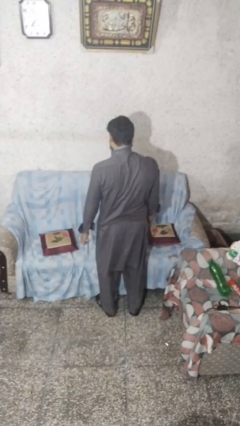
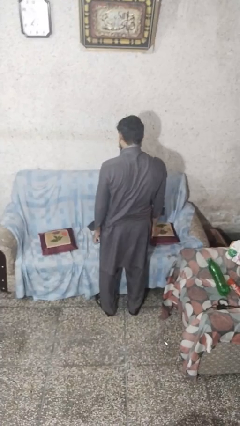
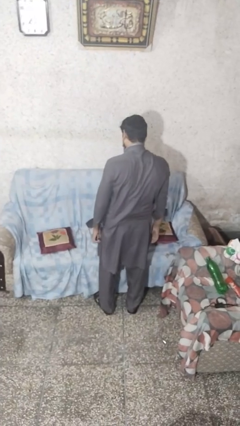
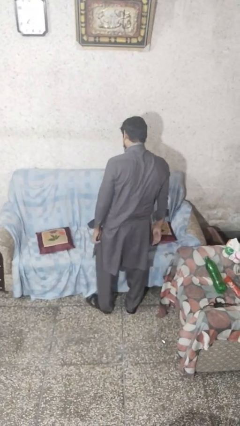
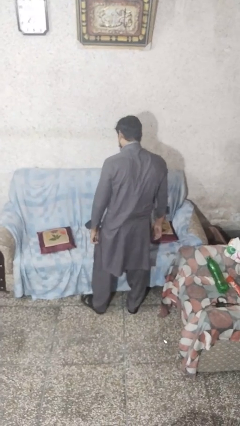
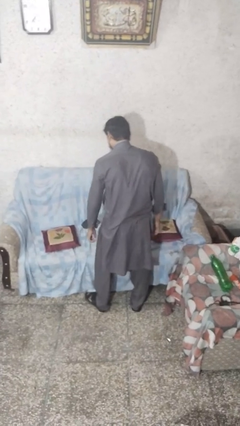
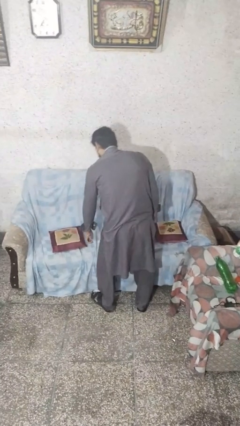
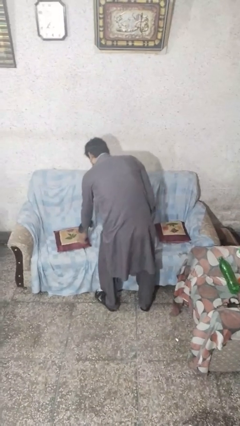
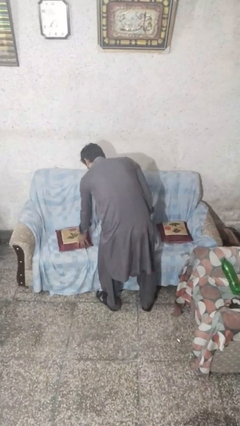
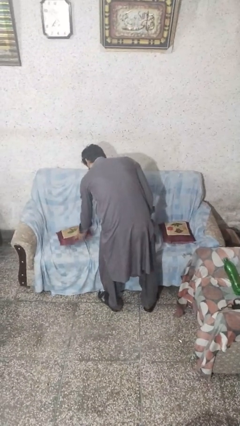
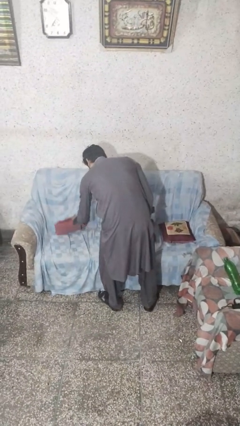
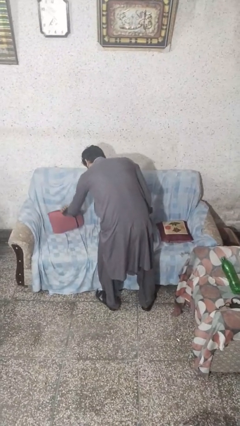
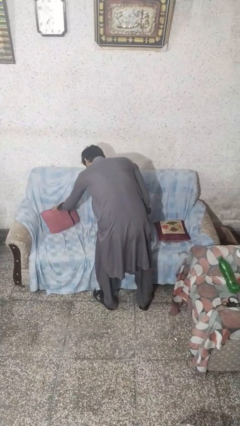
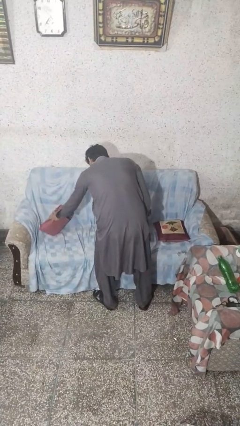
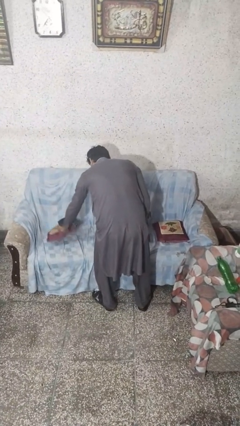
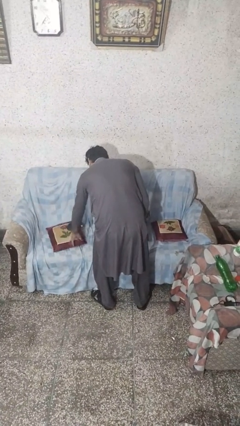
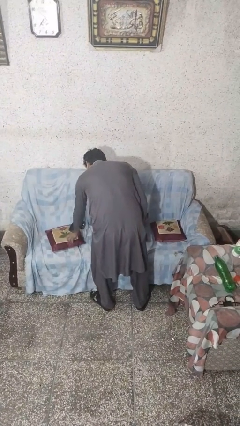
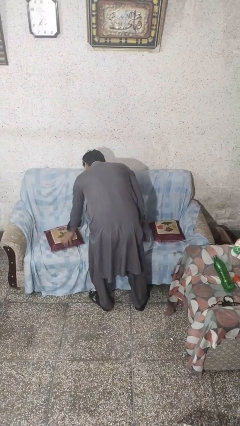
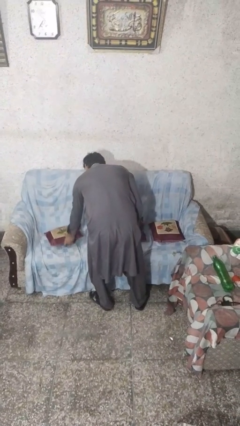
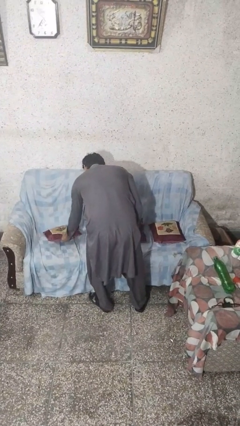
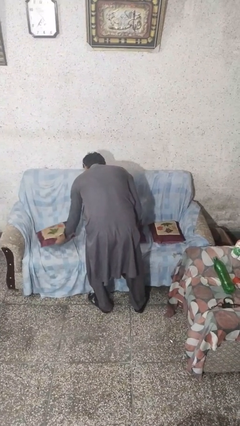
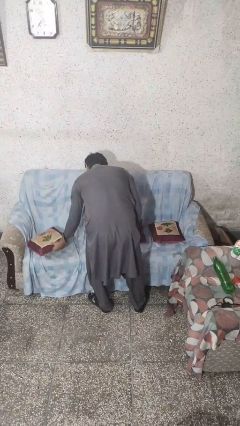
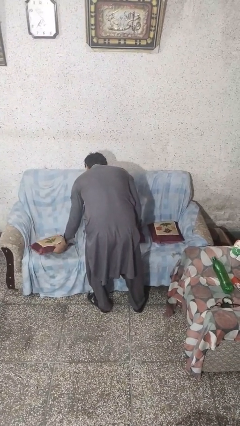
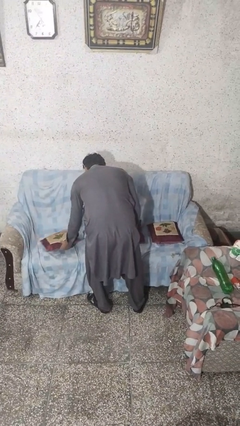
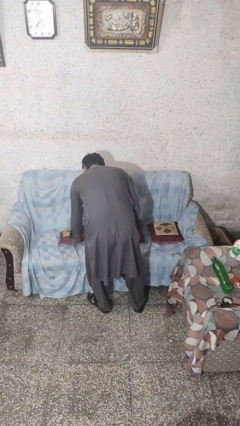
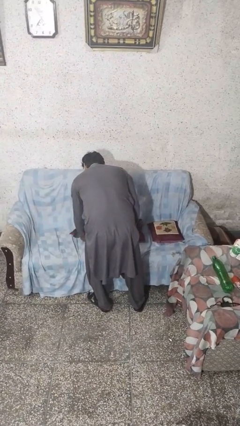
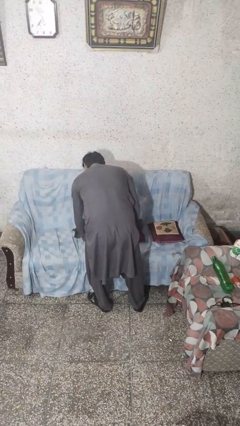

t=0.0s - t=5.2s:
person searches in couch

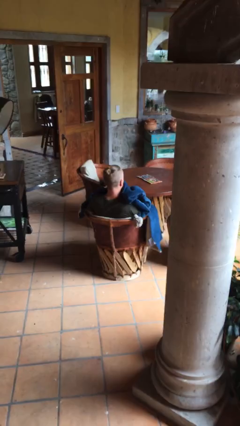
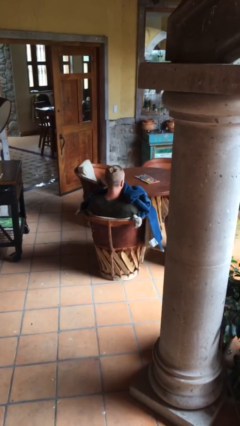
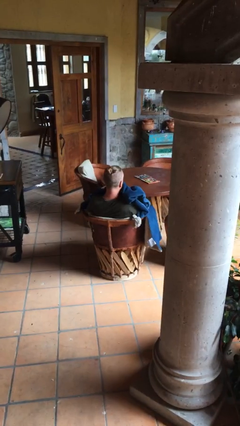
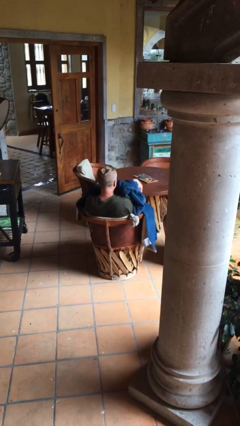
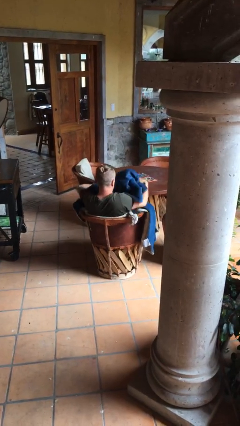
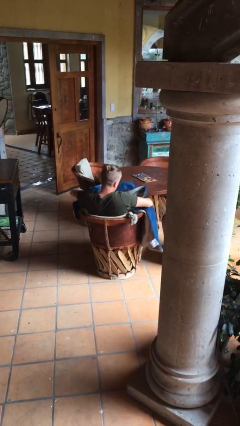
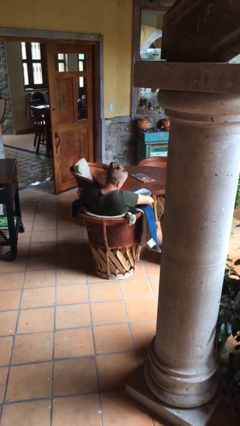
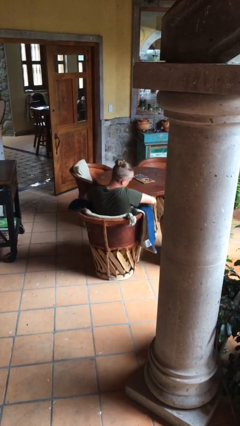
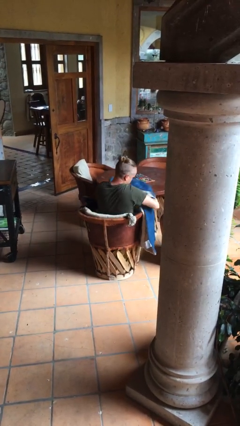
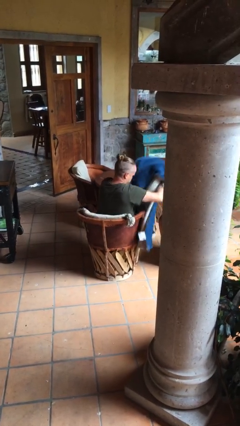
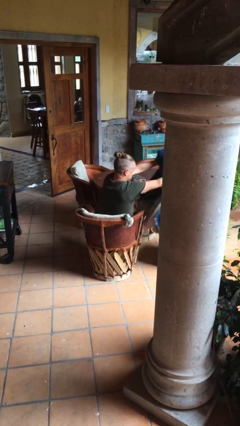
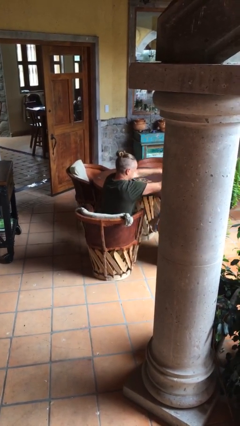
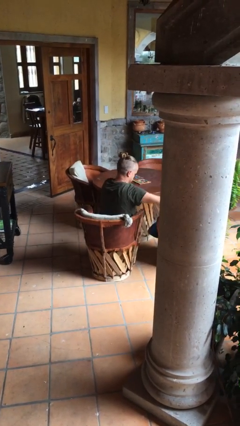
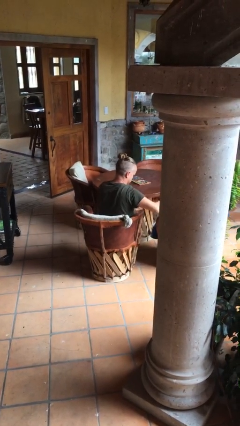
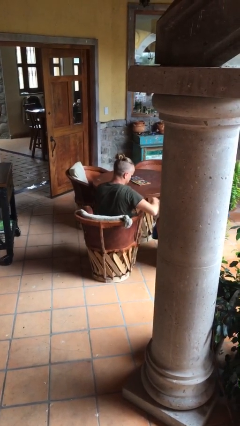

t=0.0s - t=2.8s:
person uncovers with blanket

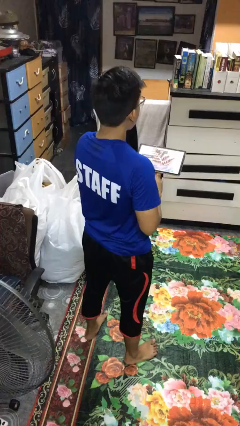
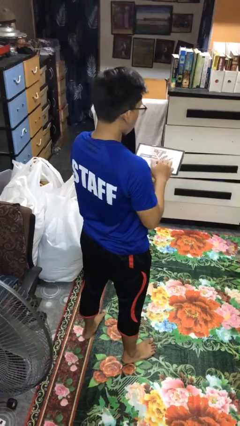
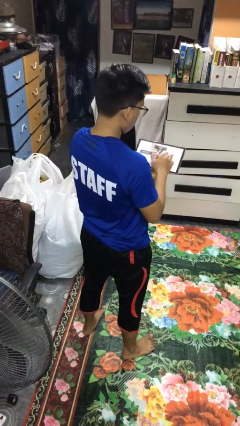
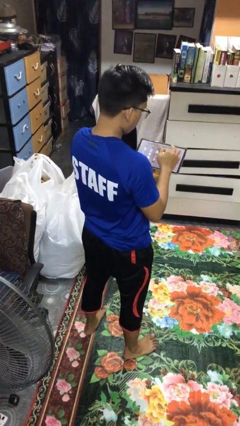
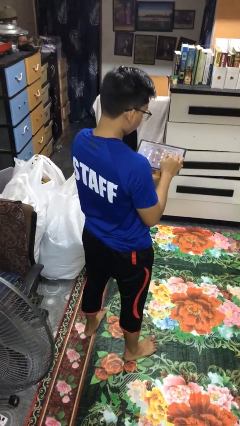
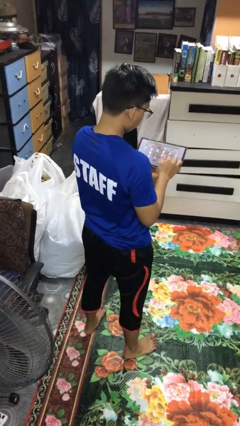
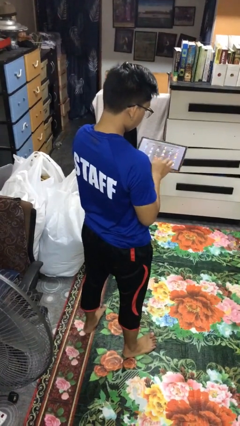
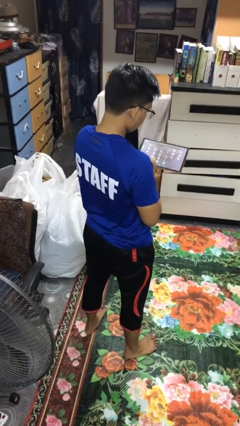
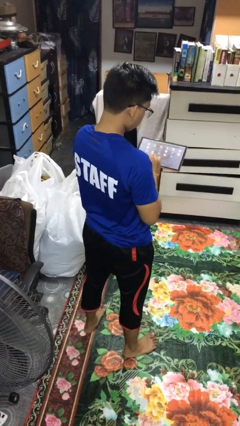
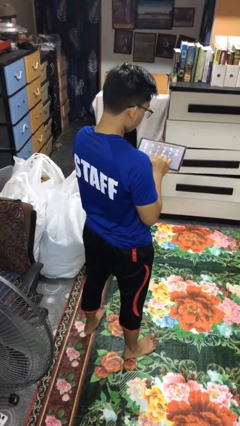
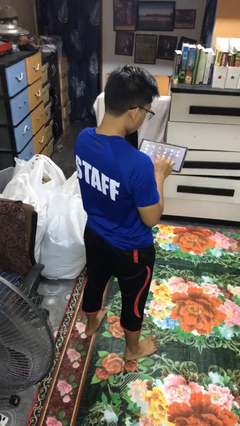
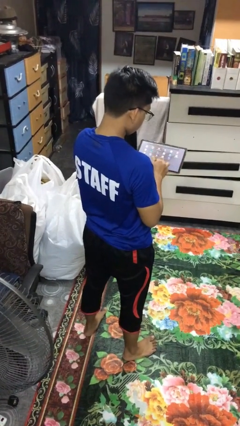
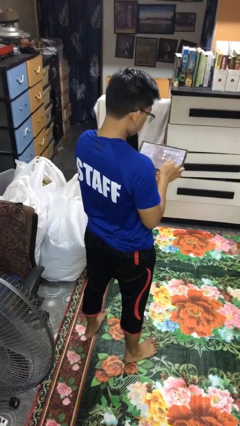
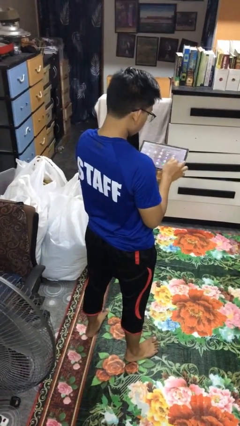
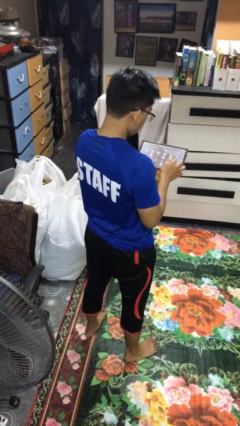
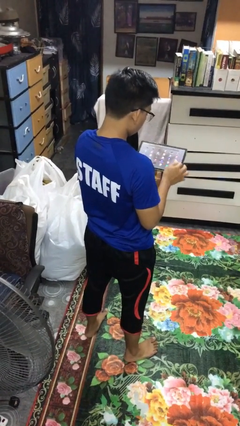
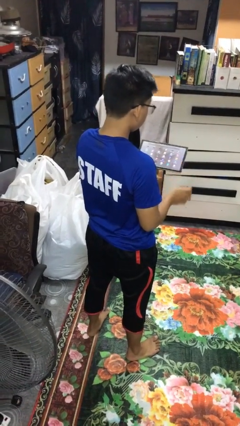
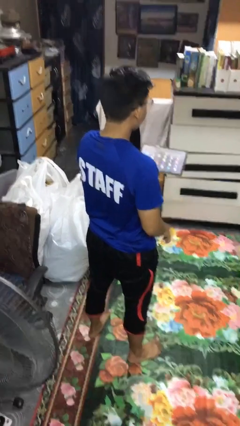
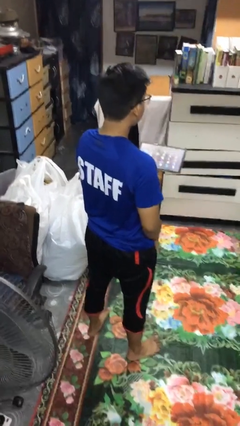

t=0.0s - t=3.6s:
person interacts with tablet

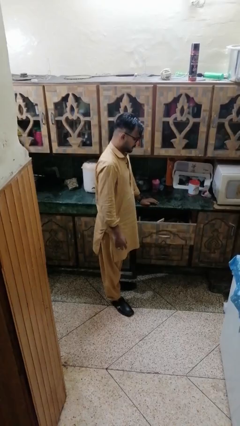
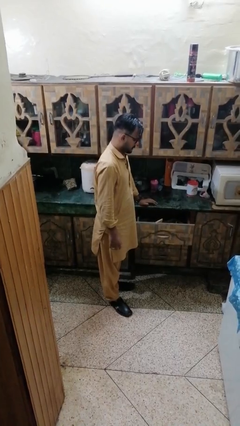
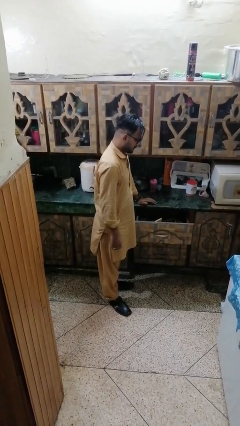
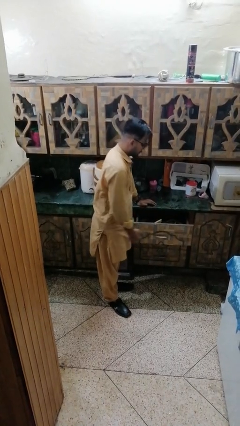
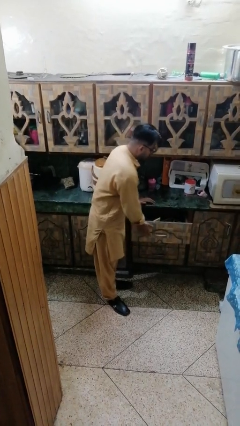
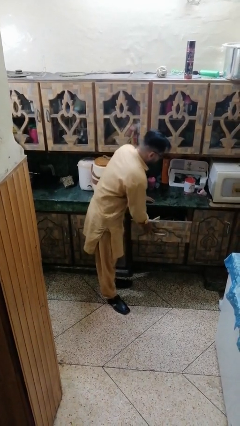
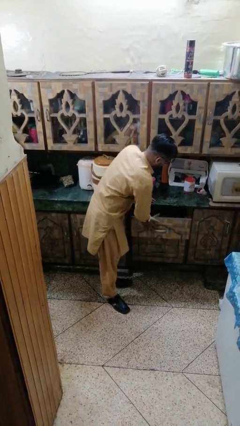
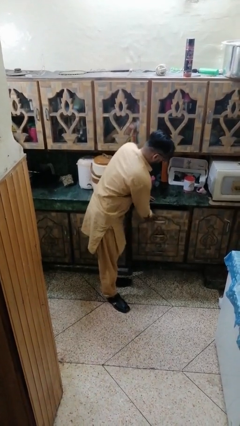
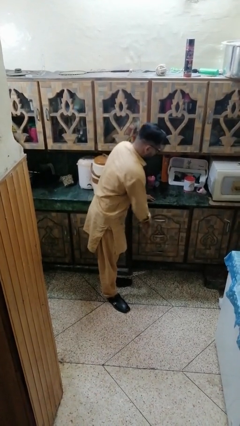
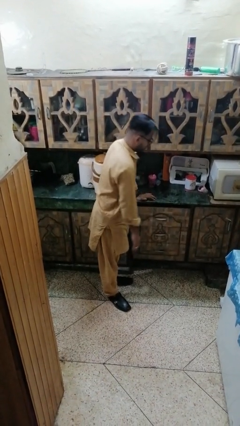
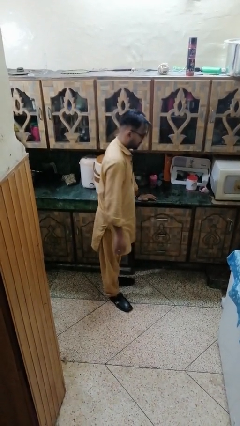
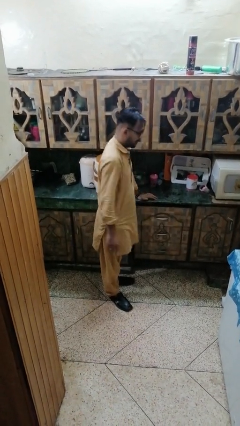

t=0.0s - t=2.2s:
person closes kitchen drawer

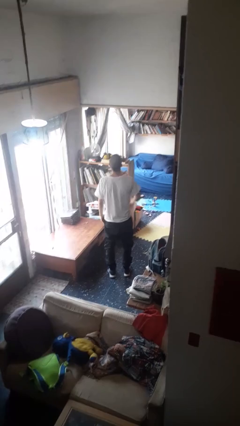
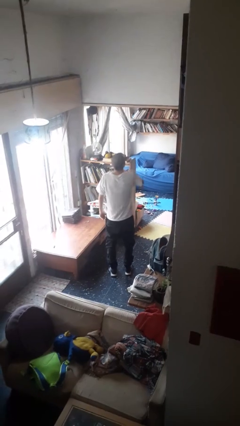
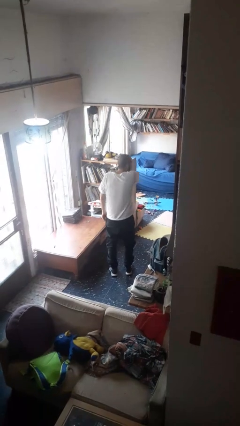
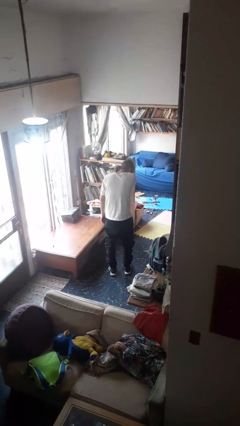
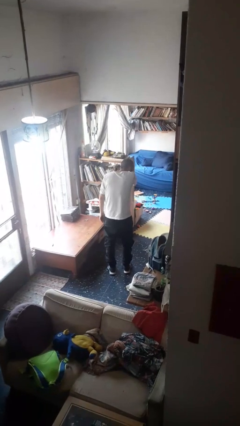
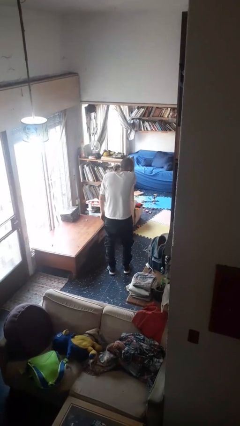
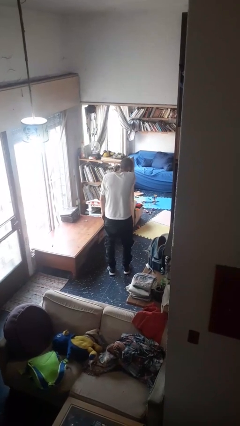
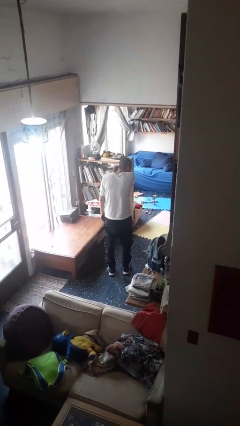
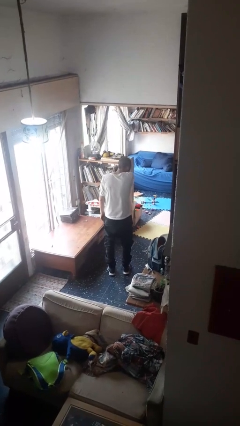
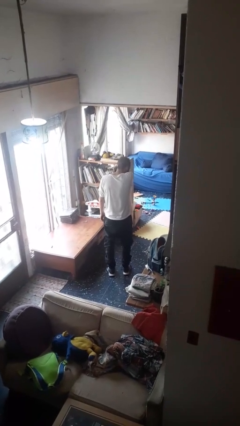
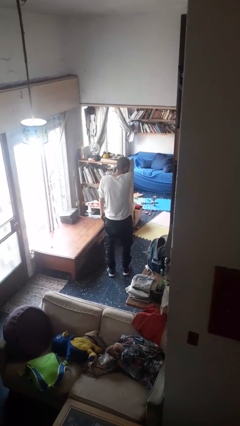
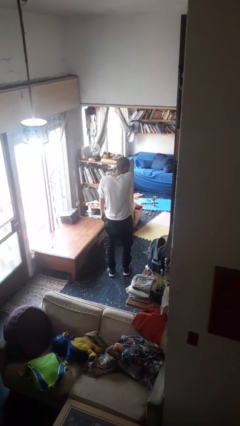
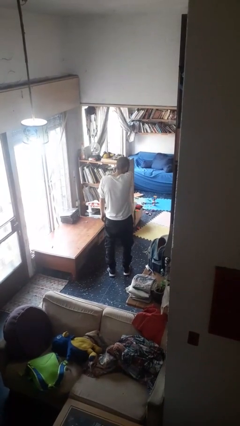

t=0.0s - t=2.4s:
person sneezes into arm

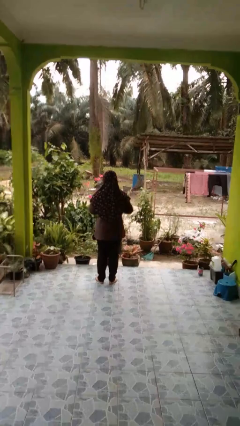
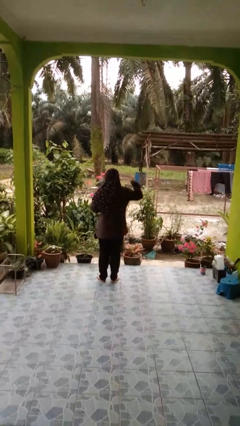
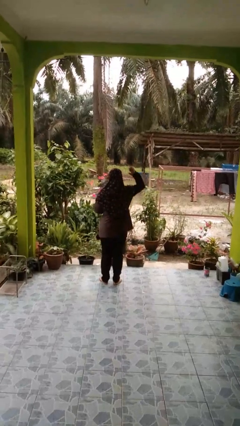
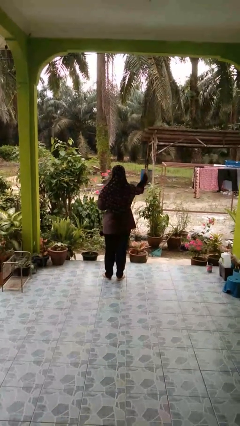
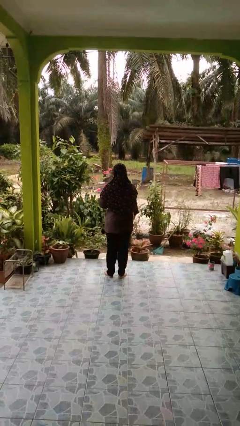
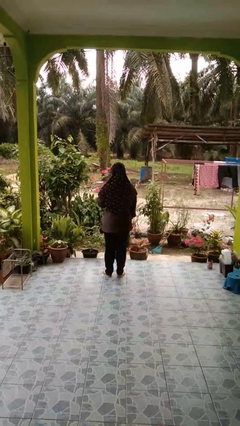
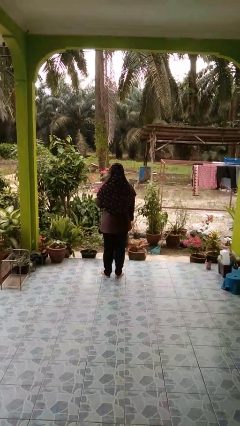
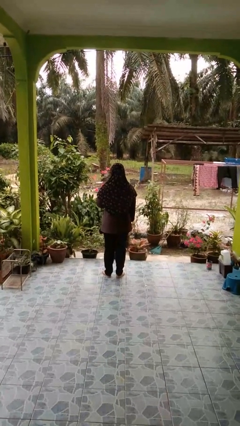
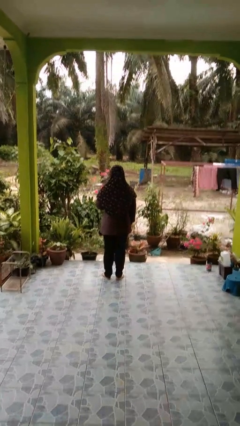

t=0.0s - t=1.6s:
person karate chop
